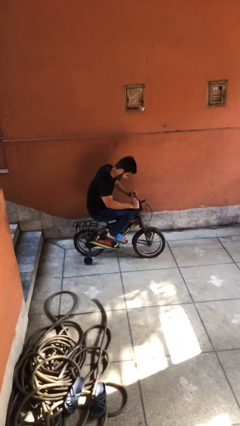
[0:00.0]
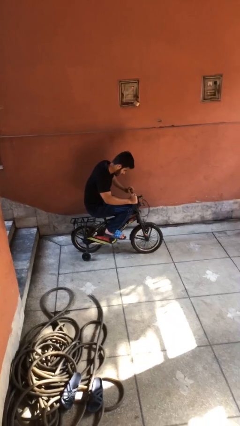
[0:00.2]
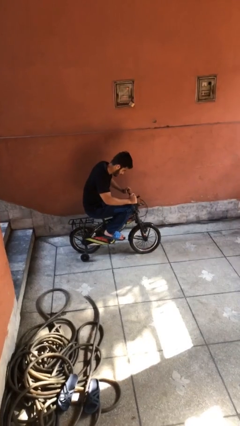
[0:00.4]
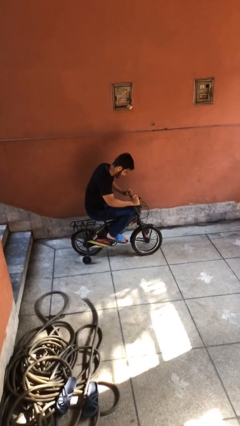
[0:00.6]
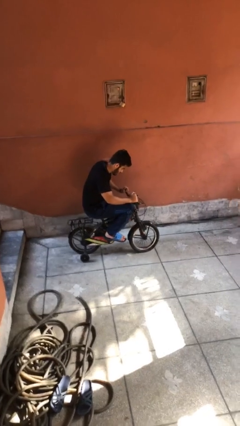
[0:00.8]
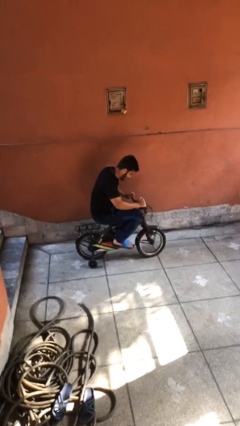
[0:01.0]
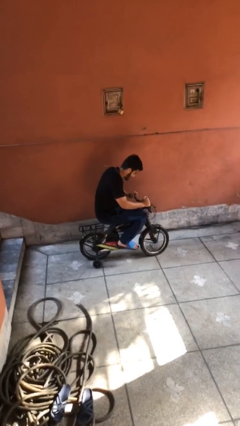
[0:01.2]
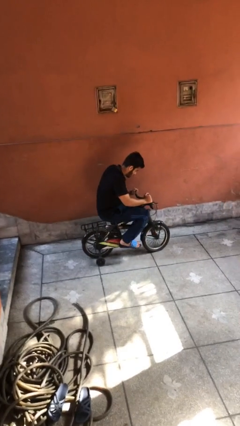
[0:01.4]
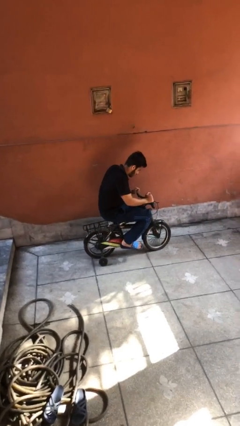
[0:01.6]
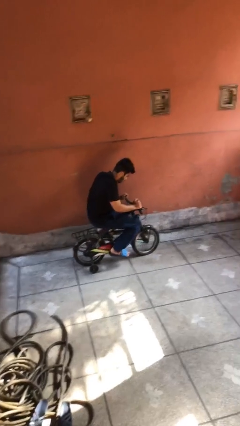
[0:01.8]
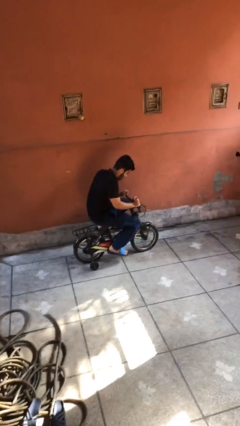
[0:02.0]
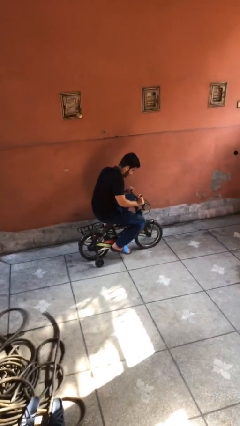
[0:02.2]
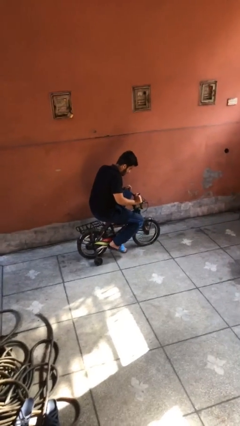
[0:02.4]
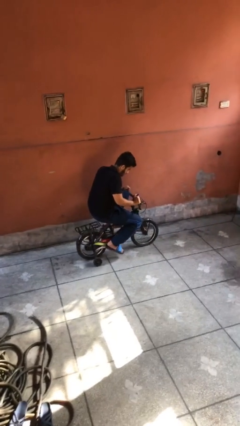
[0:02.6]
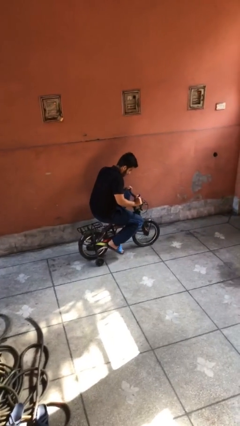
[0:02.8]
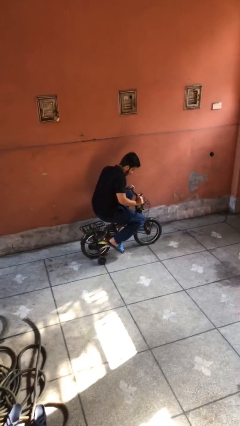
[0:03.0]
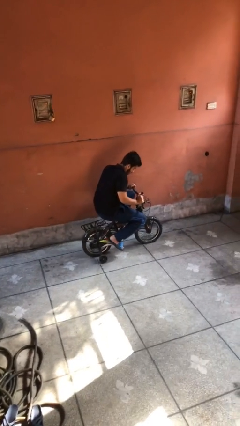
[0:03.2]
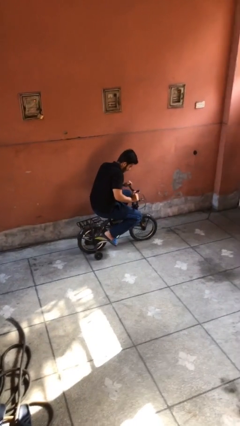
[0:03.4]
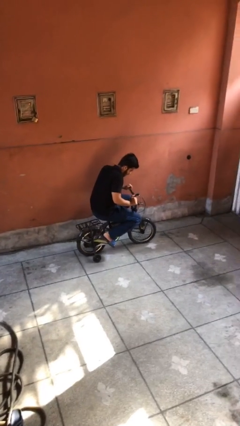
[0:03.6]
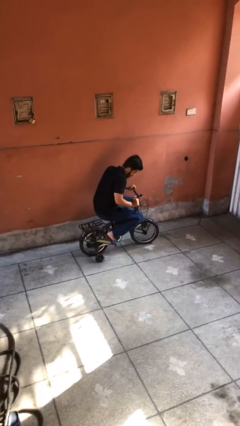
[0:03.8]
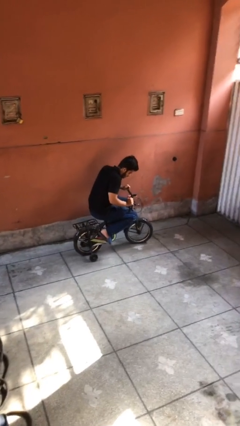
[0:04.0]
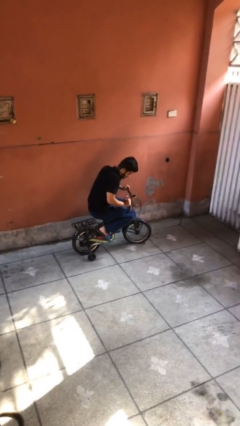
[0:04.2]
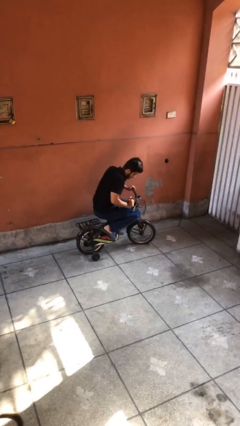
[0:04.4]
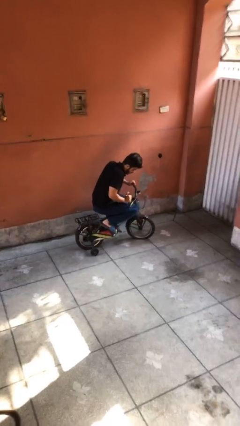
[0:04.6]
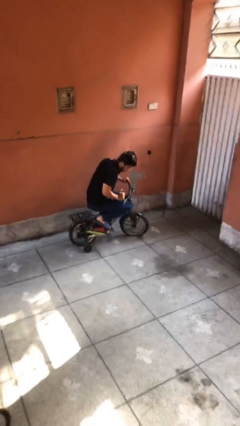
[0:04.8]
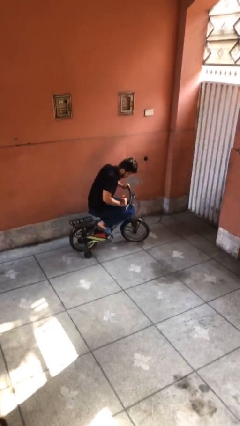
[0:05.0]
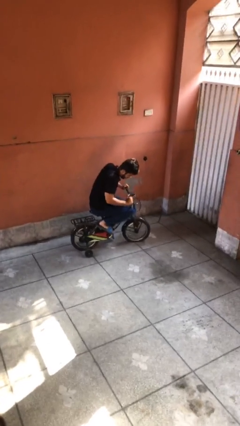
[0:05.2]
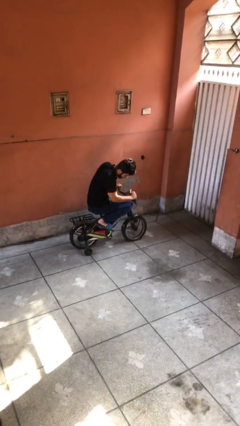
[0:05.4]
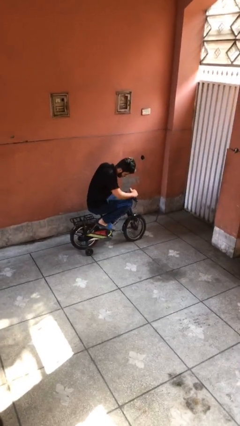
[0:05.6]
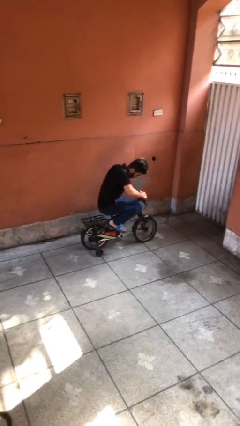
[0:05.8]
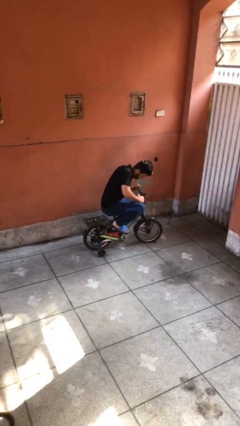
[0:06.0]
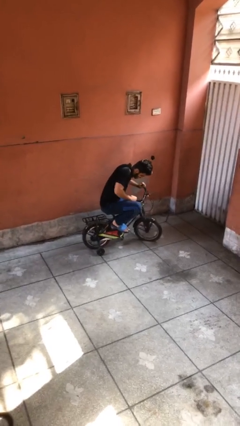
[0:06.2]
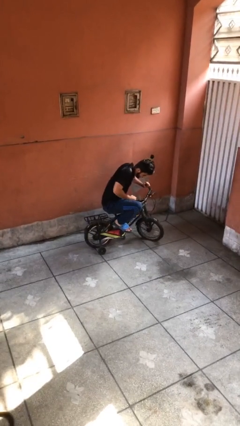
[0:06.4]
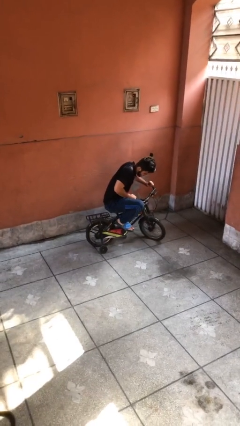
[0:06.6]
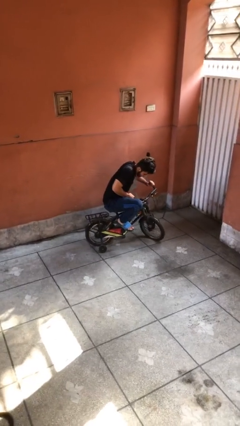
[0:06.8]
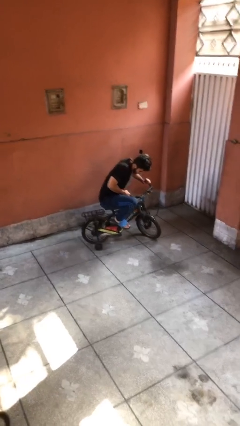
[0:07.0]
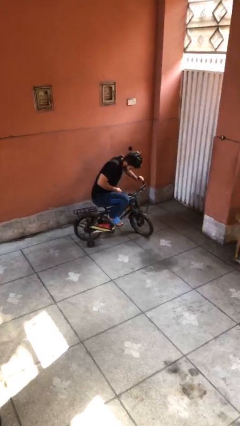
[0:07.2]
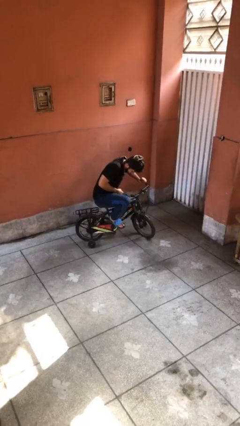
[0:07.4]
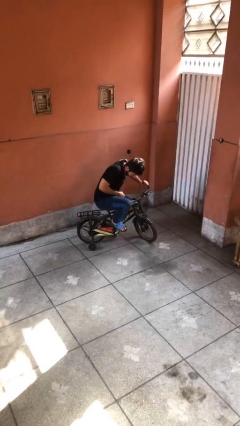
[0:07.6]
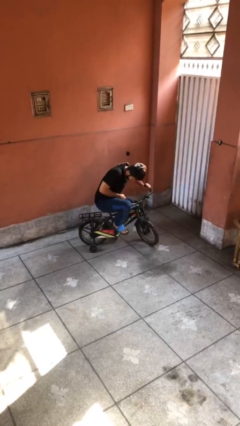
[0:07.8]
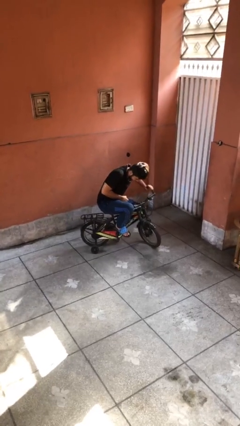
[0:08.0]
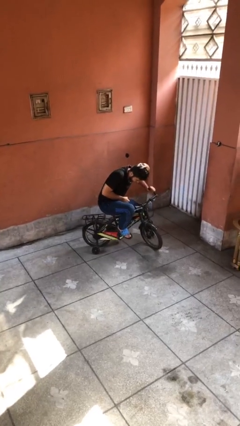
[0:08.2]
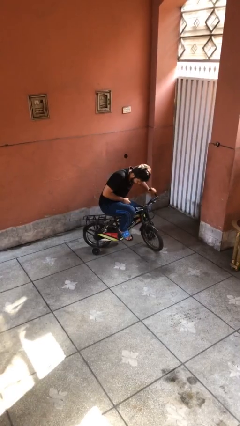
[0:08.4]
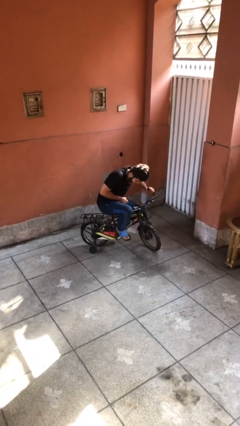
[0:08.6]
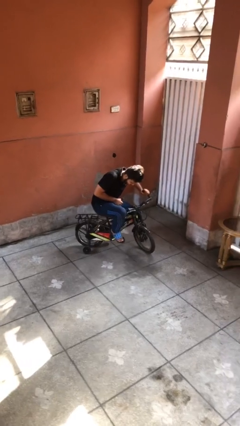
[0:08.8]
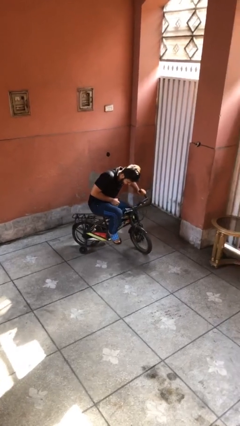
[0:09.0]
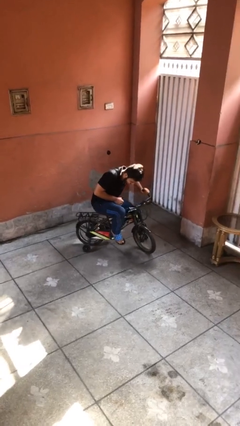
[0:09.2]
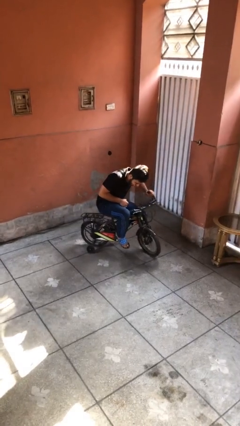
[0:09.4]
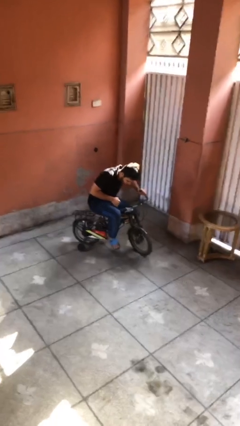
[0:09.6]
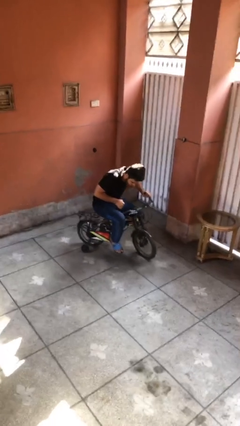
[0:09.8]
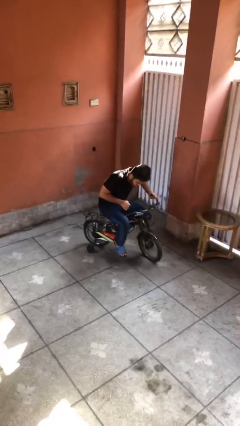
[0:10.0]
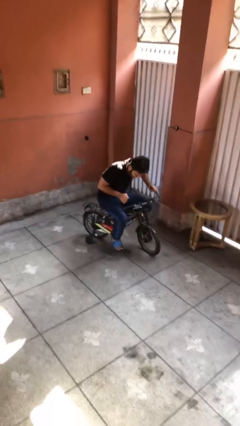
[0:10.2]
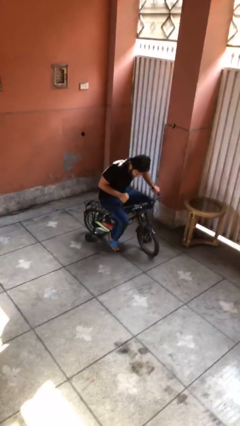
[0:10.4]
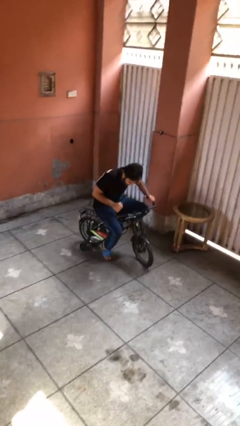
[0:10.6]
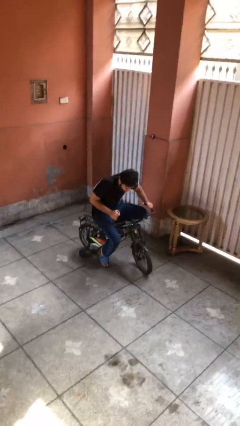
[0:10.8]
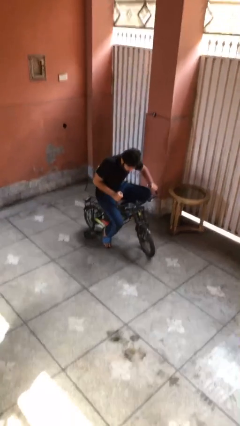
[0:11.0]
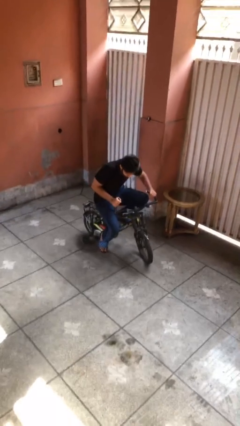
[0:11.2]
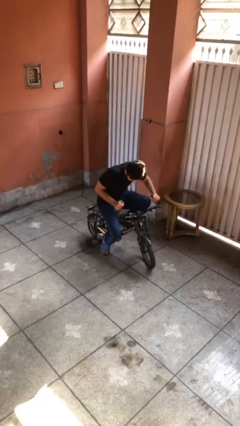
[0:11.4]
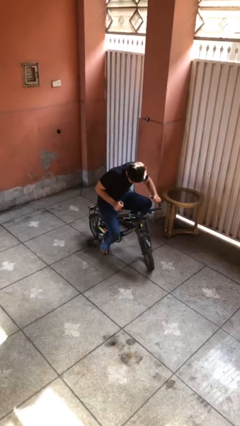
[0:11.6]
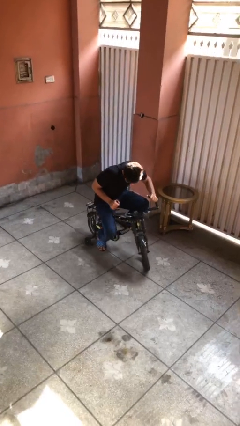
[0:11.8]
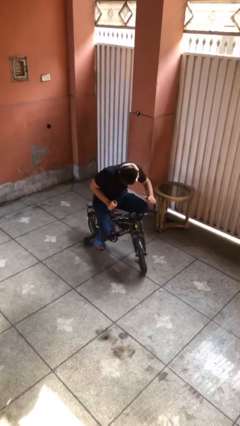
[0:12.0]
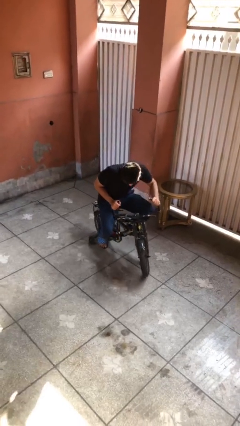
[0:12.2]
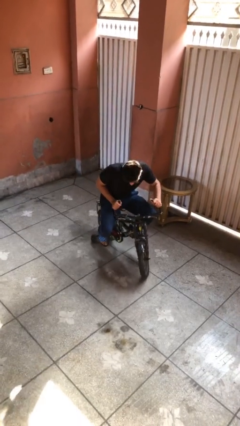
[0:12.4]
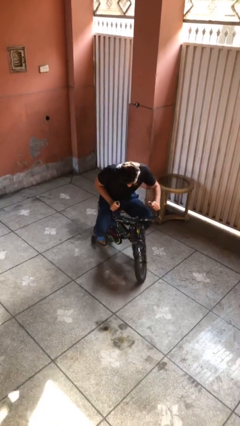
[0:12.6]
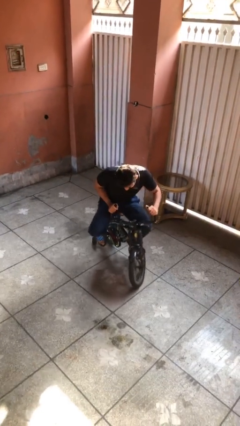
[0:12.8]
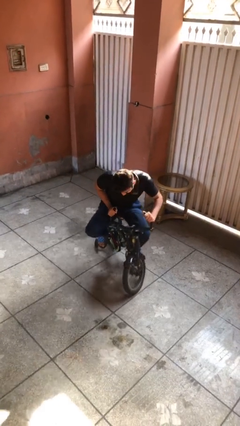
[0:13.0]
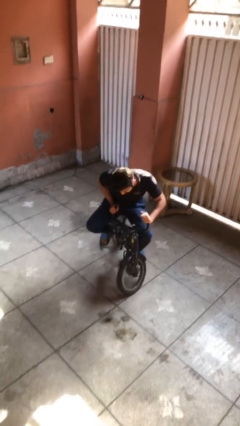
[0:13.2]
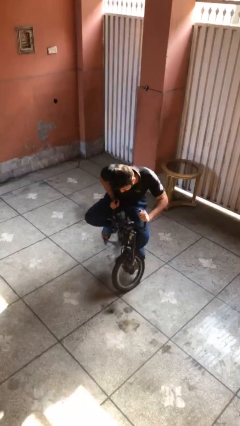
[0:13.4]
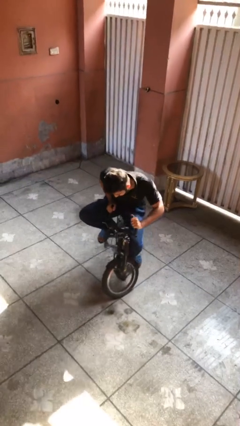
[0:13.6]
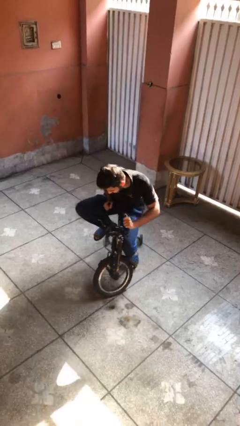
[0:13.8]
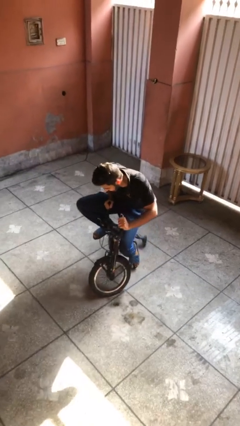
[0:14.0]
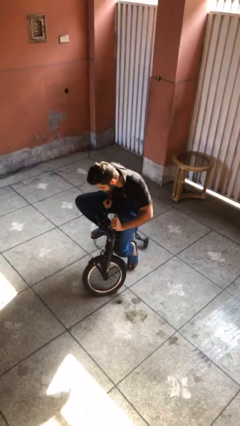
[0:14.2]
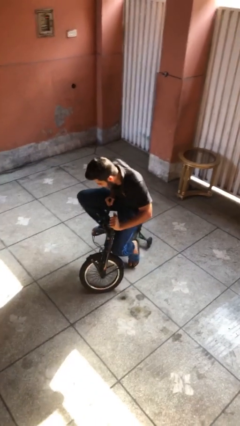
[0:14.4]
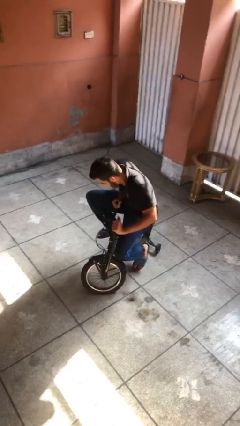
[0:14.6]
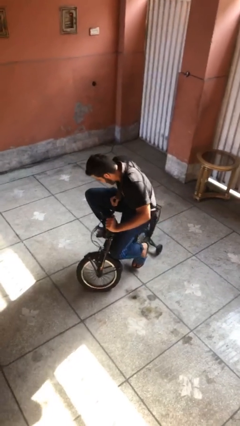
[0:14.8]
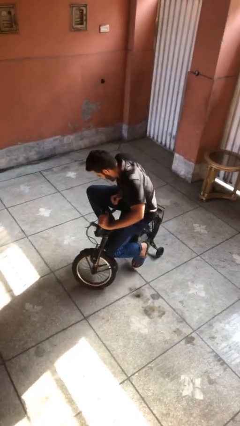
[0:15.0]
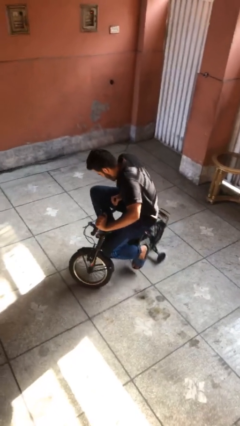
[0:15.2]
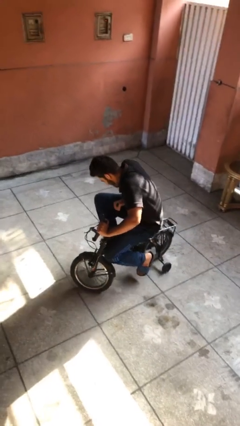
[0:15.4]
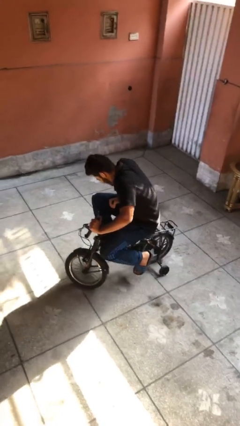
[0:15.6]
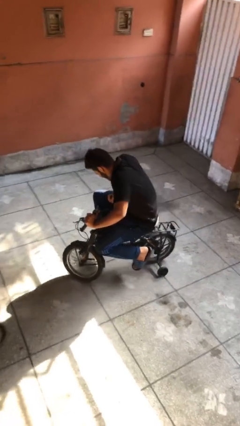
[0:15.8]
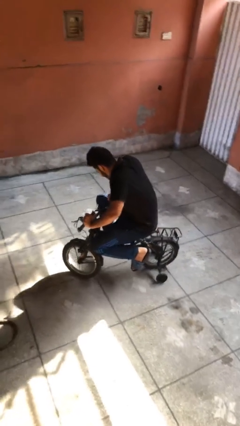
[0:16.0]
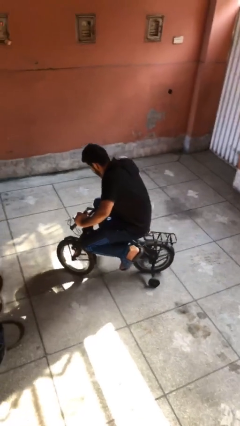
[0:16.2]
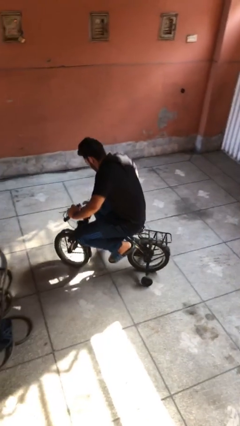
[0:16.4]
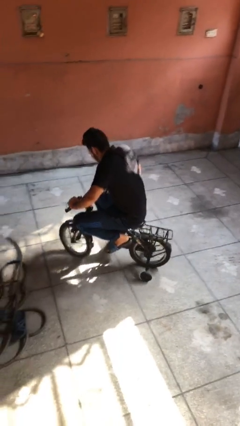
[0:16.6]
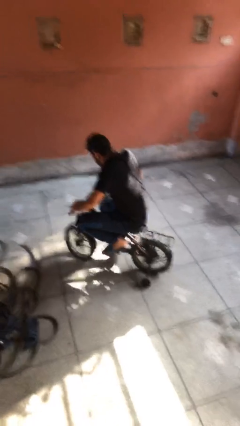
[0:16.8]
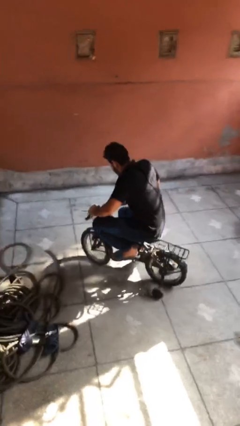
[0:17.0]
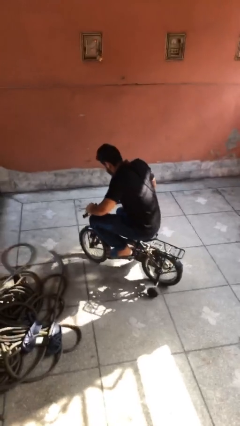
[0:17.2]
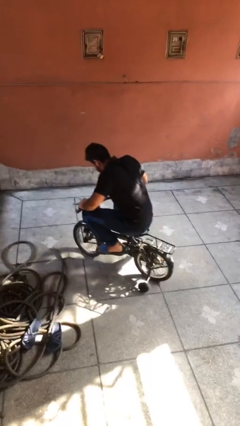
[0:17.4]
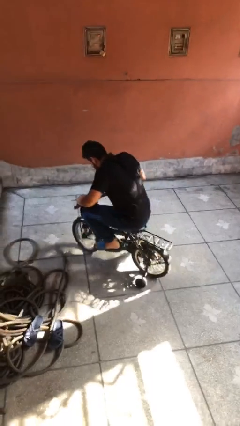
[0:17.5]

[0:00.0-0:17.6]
person rides bicycle

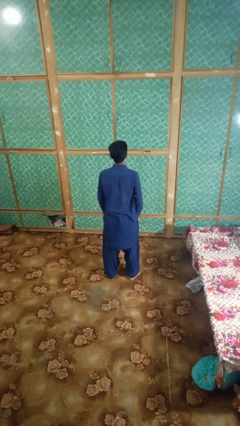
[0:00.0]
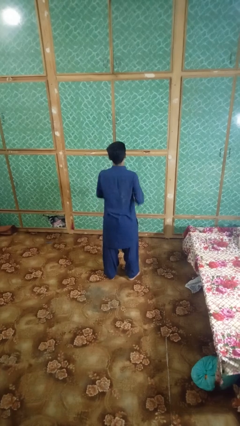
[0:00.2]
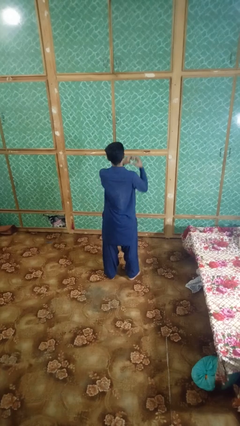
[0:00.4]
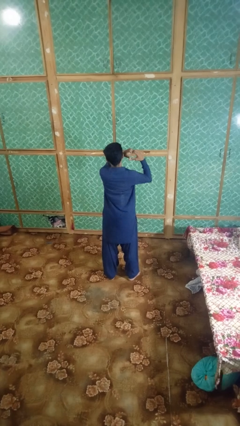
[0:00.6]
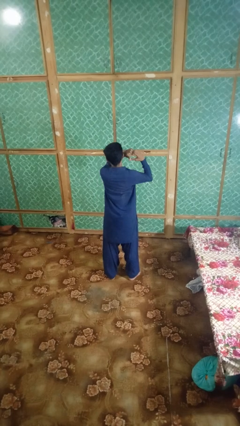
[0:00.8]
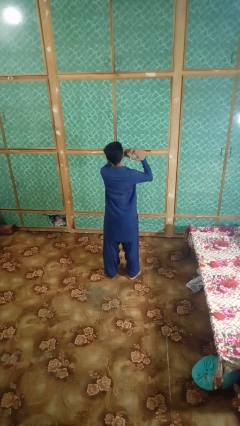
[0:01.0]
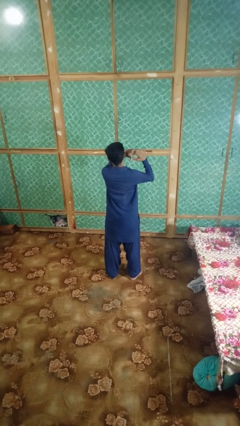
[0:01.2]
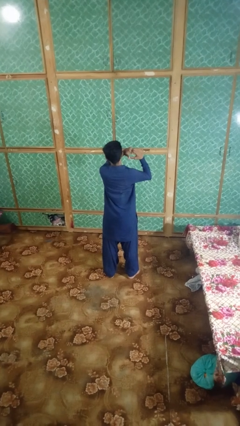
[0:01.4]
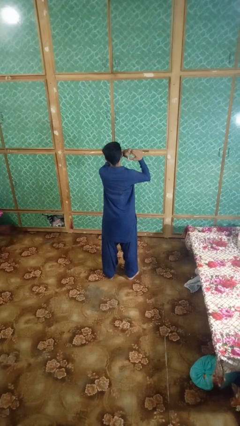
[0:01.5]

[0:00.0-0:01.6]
person gestures heart
